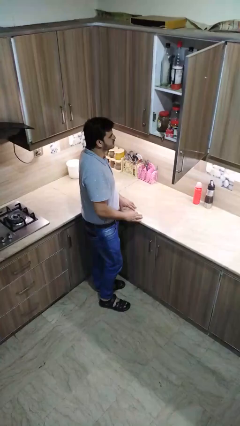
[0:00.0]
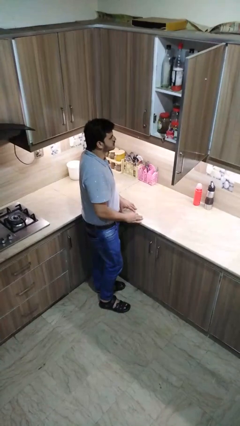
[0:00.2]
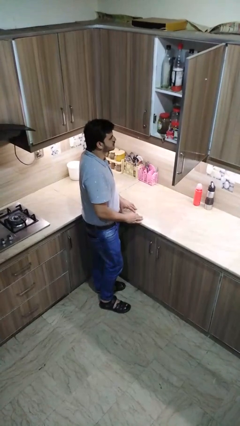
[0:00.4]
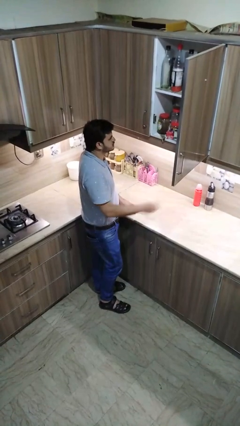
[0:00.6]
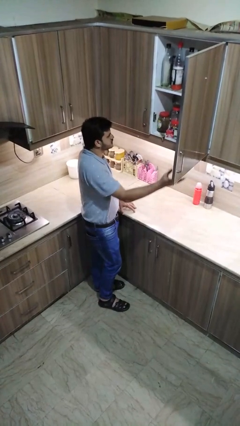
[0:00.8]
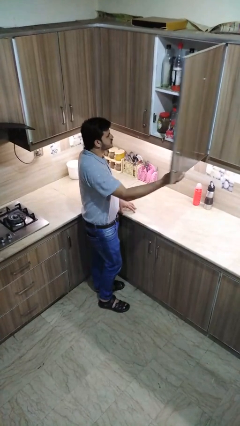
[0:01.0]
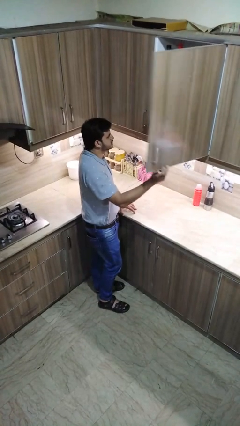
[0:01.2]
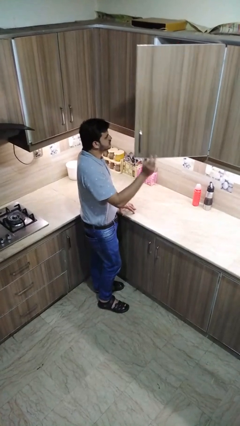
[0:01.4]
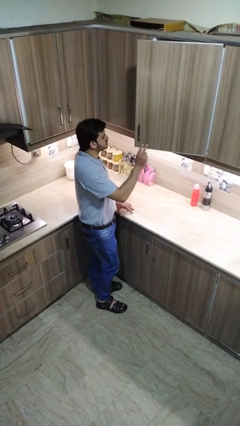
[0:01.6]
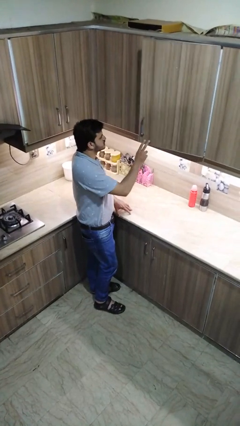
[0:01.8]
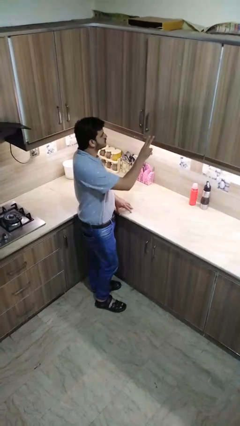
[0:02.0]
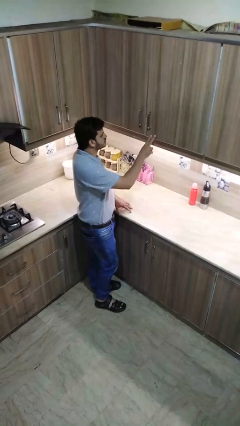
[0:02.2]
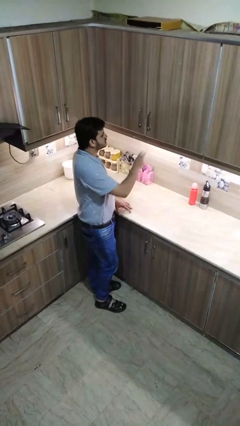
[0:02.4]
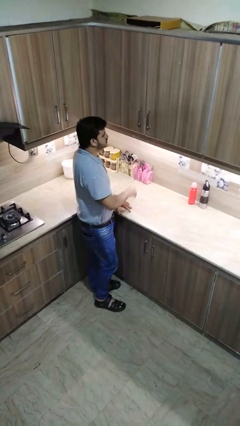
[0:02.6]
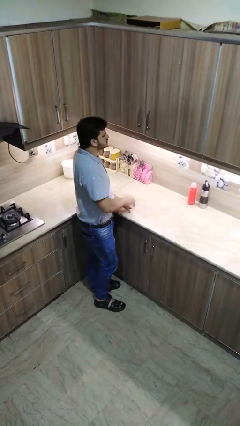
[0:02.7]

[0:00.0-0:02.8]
person closes cabinet

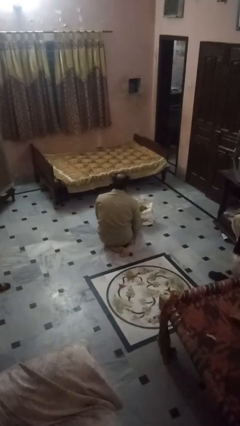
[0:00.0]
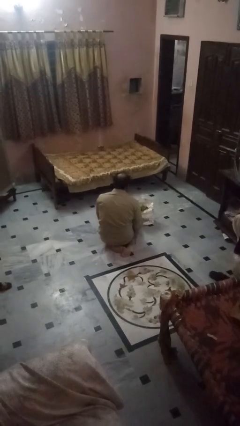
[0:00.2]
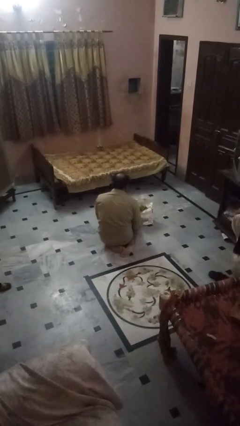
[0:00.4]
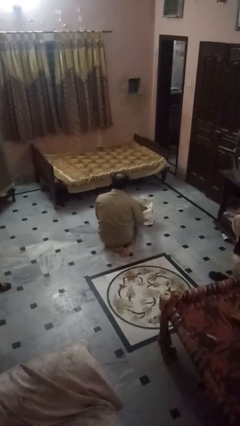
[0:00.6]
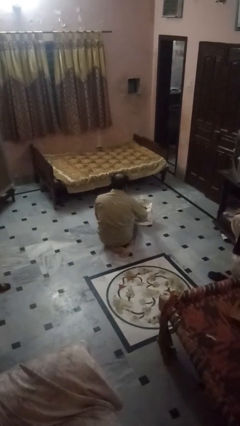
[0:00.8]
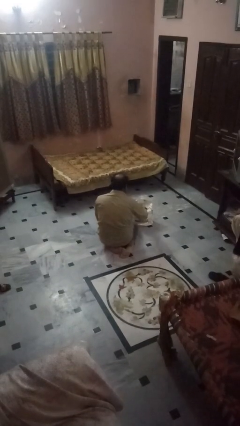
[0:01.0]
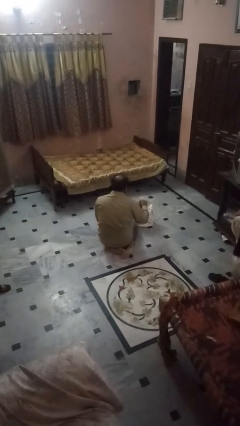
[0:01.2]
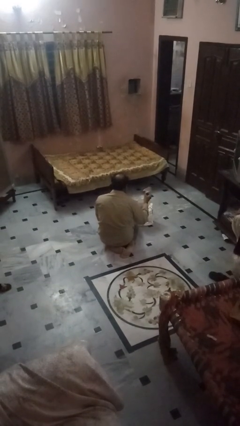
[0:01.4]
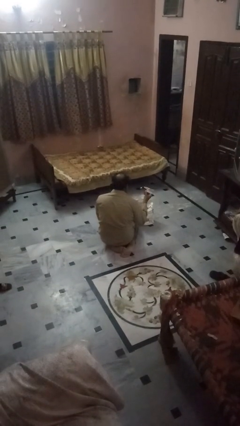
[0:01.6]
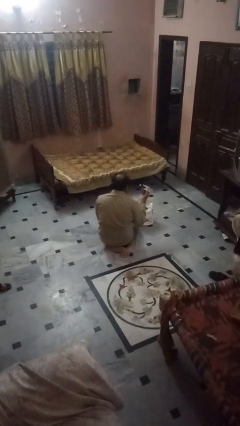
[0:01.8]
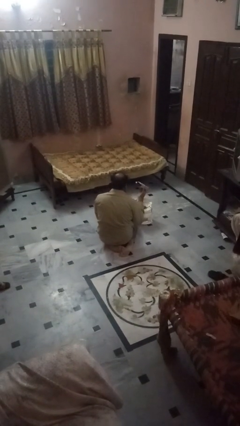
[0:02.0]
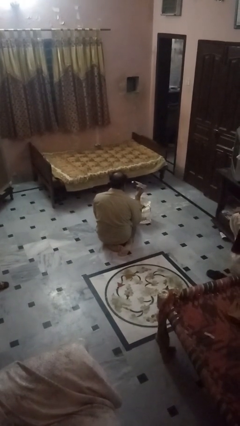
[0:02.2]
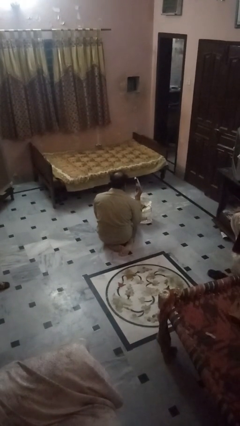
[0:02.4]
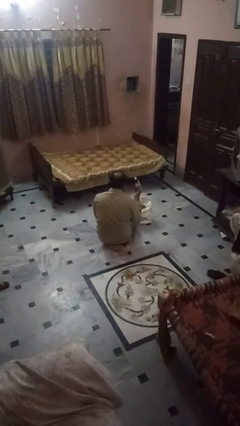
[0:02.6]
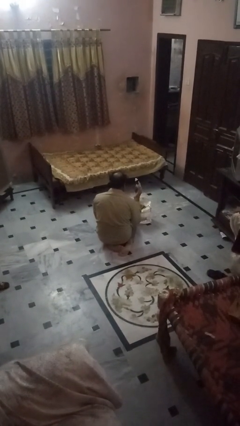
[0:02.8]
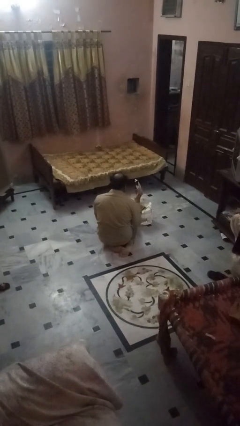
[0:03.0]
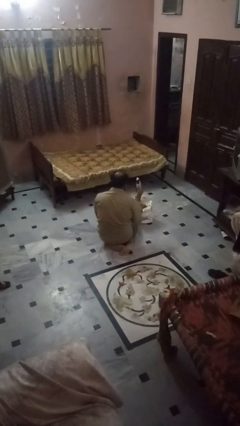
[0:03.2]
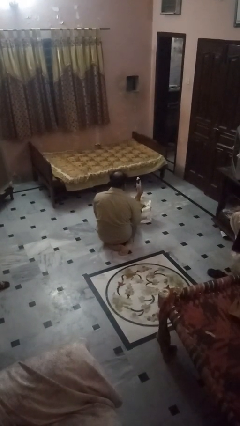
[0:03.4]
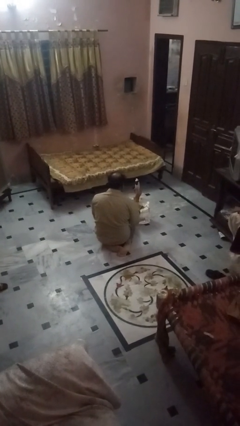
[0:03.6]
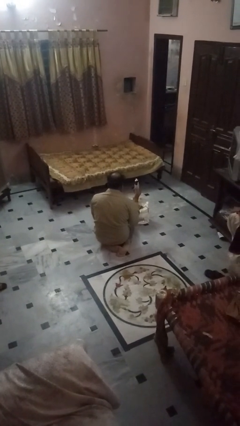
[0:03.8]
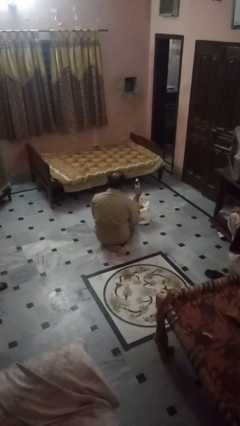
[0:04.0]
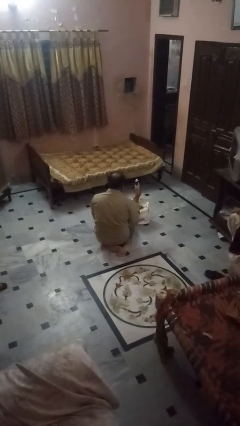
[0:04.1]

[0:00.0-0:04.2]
person takes object from bag

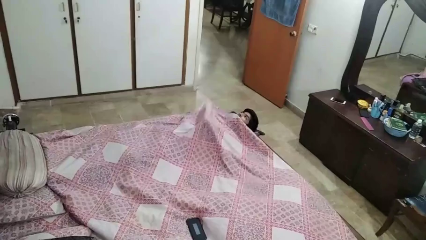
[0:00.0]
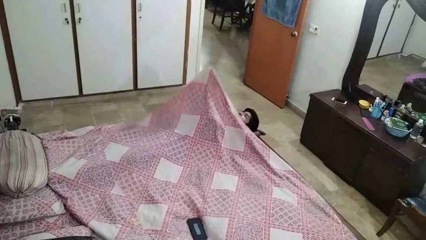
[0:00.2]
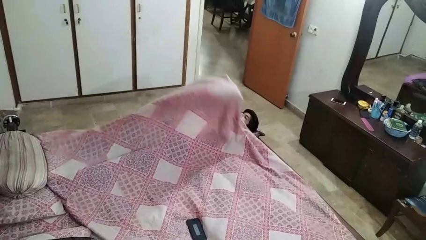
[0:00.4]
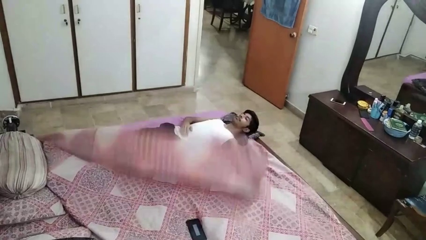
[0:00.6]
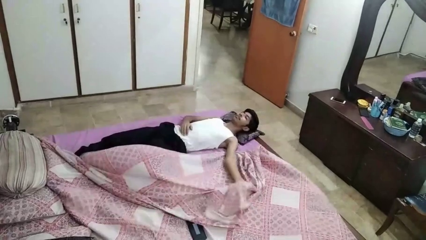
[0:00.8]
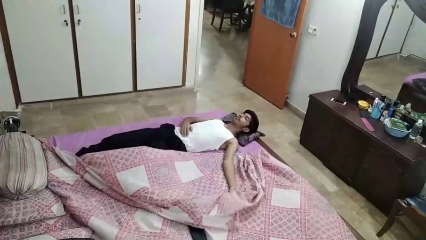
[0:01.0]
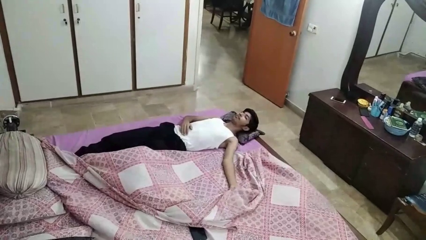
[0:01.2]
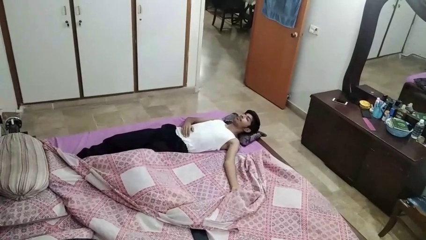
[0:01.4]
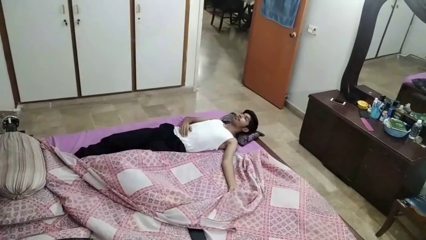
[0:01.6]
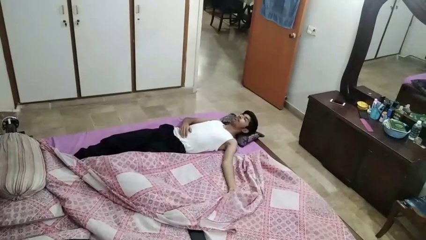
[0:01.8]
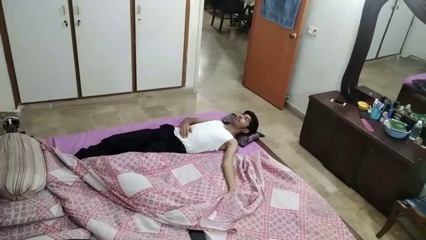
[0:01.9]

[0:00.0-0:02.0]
person uncovers with bedsheets

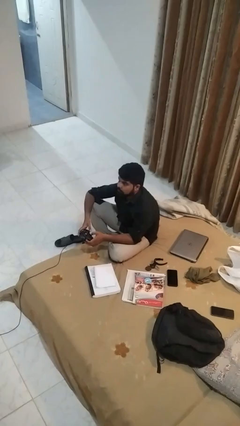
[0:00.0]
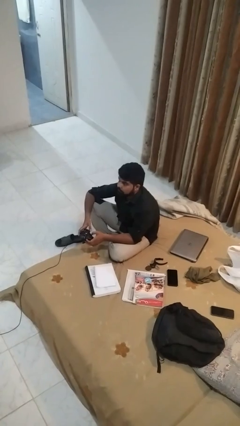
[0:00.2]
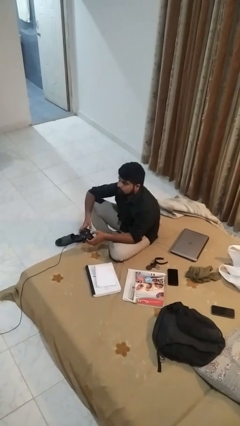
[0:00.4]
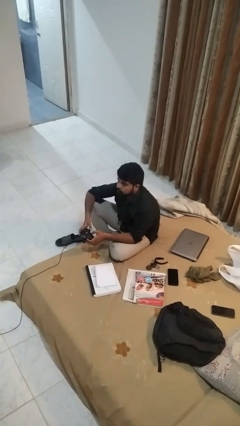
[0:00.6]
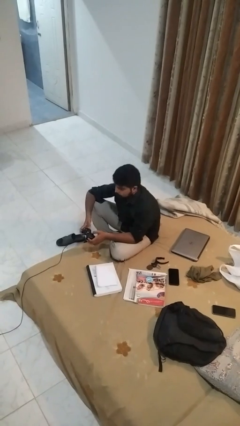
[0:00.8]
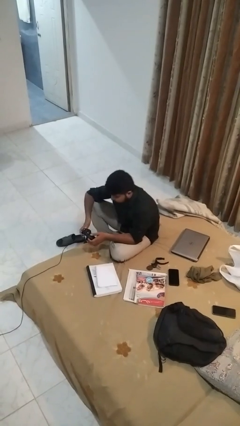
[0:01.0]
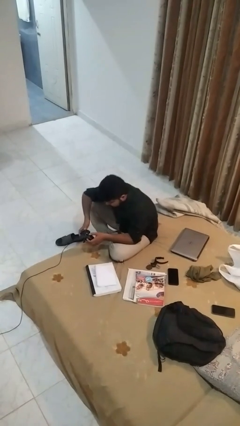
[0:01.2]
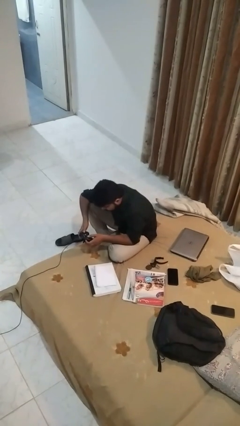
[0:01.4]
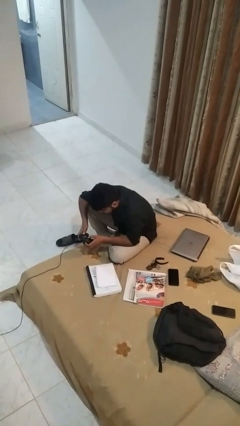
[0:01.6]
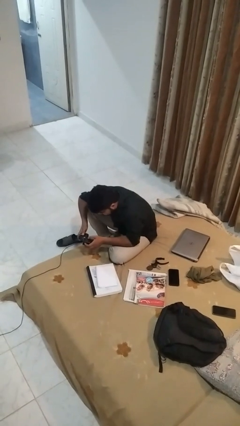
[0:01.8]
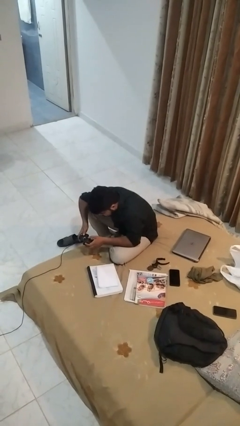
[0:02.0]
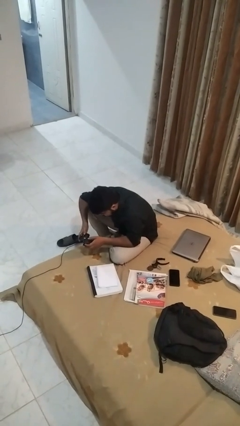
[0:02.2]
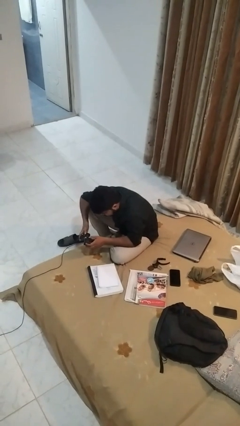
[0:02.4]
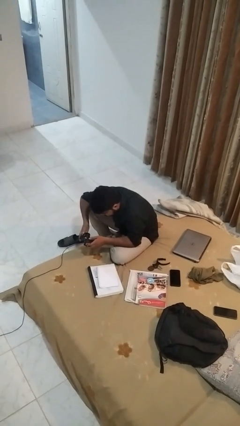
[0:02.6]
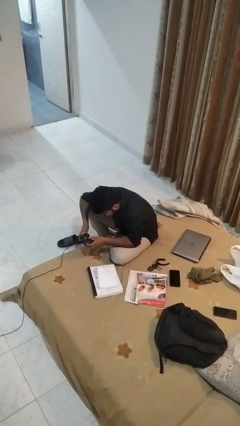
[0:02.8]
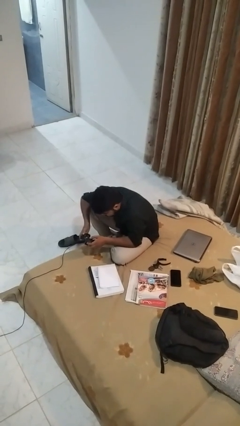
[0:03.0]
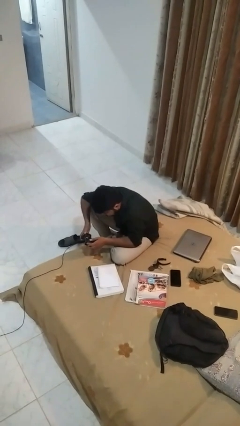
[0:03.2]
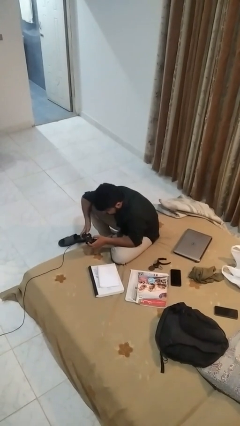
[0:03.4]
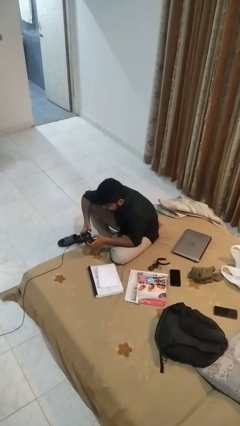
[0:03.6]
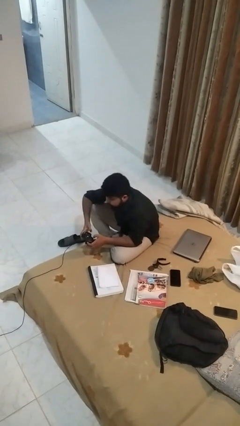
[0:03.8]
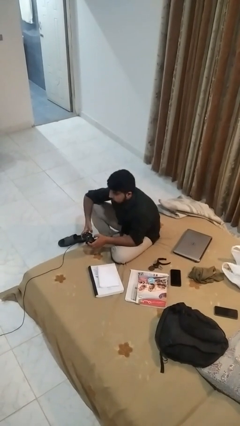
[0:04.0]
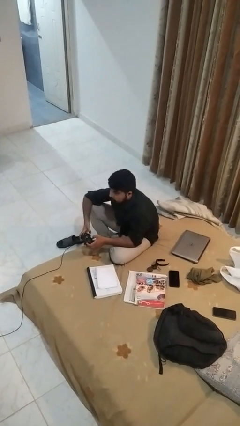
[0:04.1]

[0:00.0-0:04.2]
person interacts with handheld game

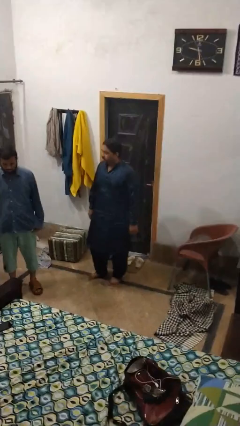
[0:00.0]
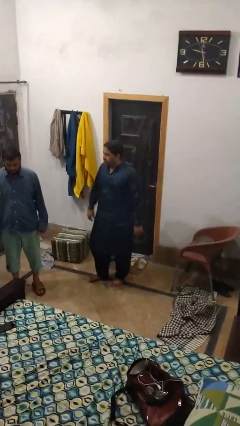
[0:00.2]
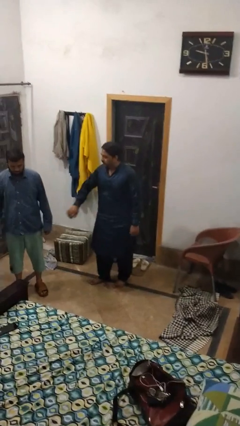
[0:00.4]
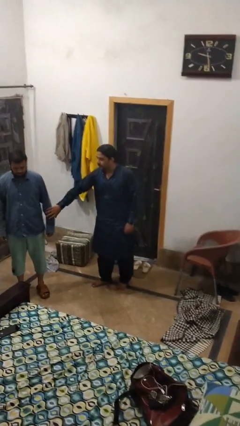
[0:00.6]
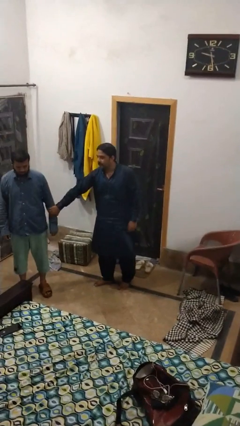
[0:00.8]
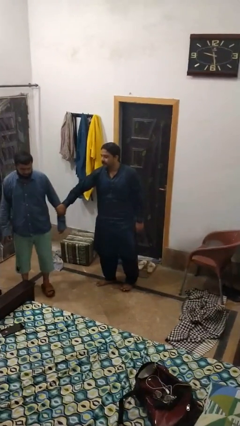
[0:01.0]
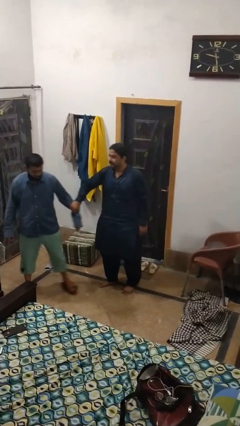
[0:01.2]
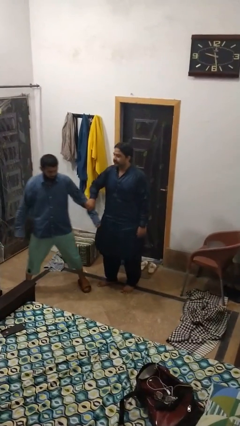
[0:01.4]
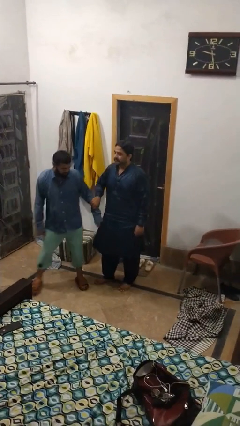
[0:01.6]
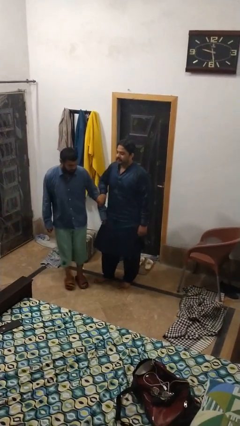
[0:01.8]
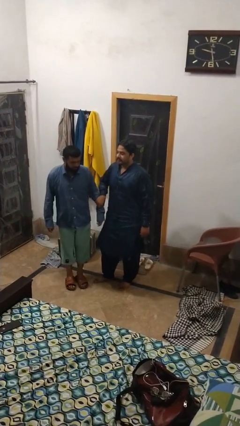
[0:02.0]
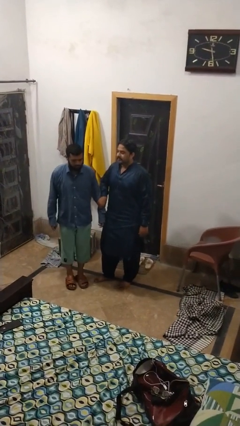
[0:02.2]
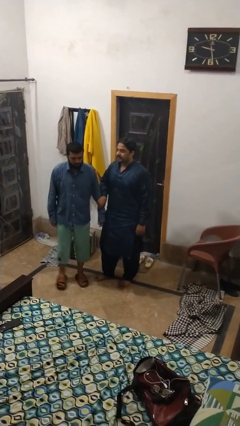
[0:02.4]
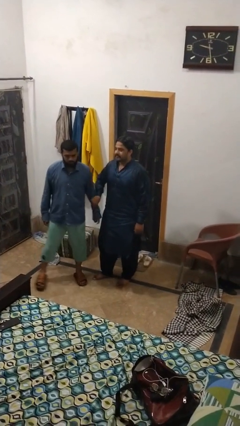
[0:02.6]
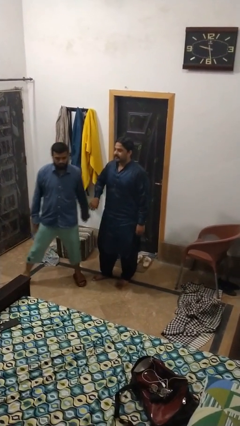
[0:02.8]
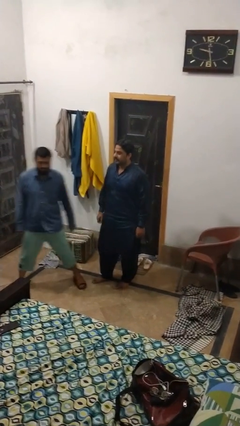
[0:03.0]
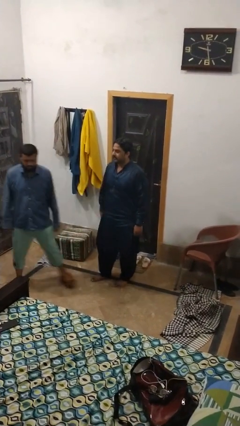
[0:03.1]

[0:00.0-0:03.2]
person grabs person by forearm

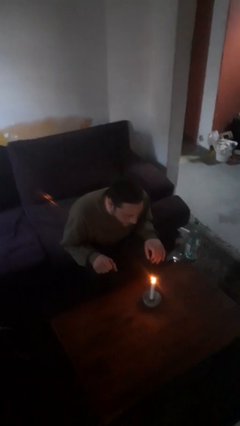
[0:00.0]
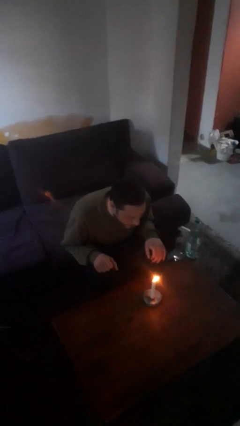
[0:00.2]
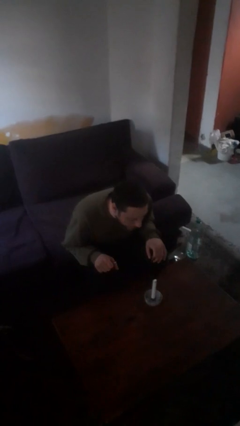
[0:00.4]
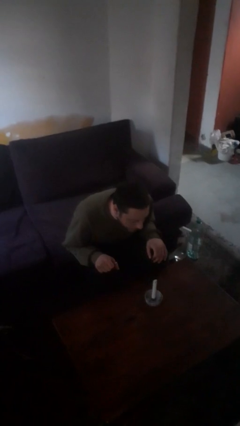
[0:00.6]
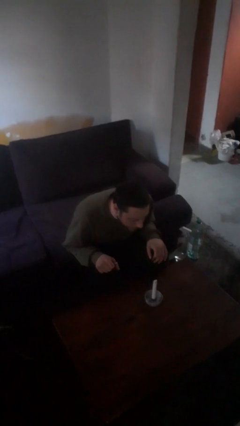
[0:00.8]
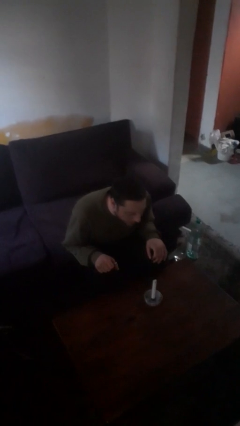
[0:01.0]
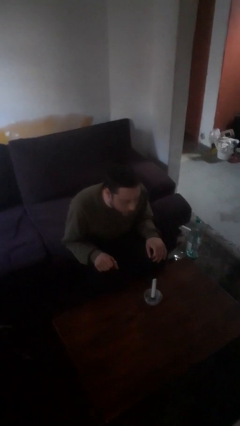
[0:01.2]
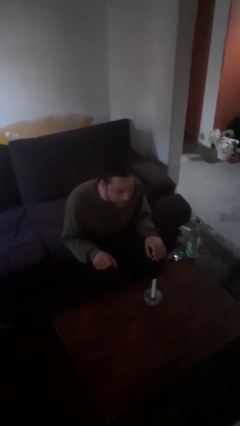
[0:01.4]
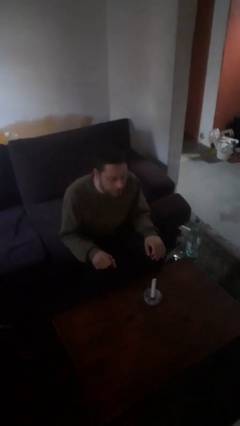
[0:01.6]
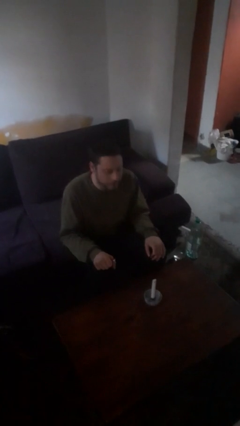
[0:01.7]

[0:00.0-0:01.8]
person extinguishes candle
